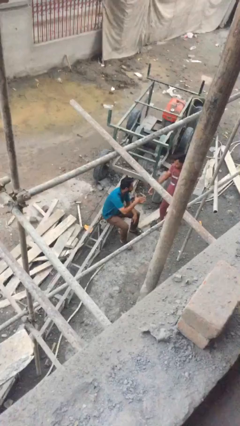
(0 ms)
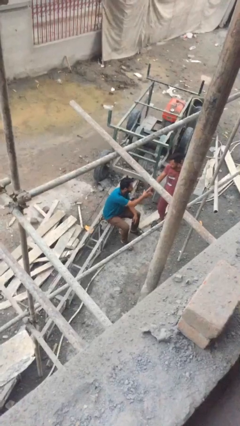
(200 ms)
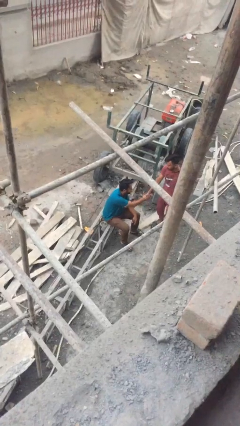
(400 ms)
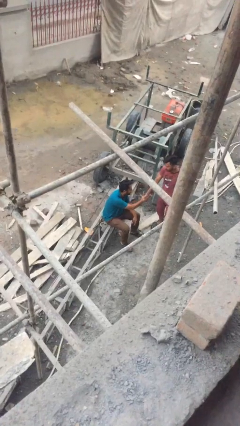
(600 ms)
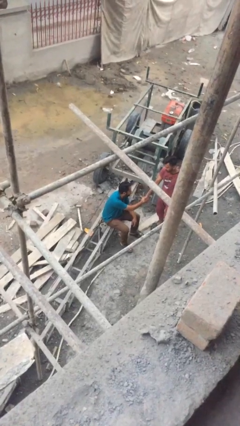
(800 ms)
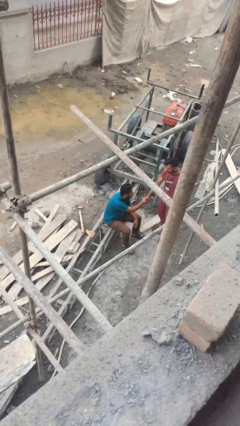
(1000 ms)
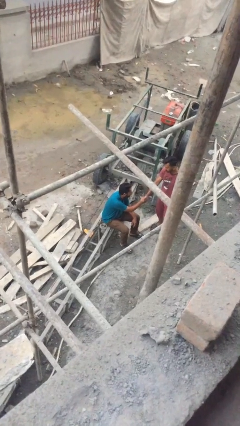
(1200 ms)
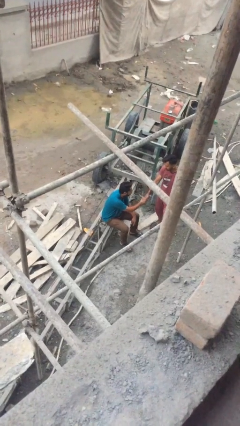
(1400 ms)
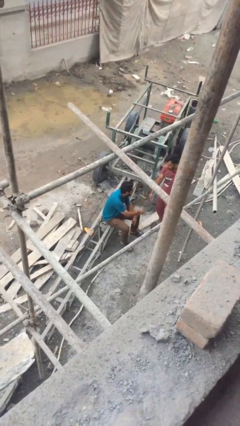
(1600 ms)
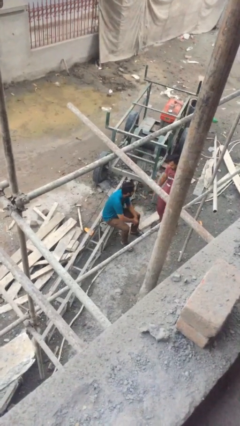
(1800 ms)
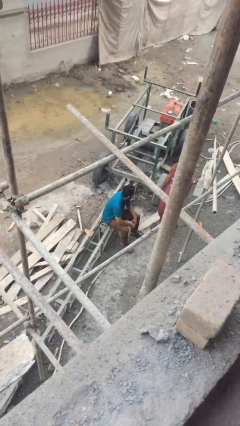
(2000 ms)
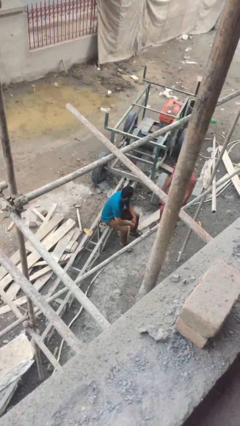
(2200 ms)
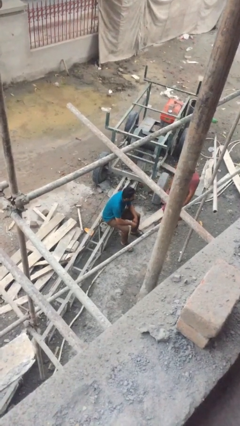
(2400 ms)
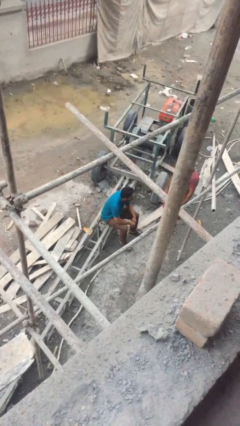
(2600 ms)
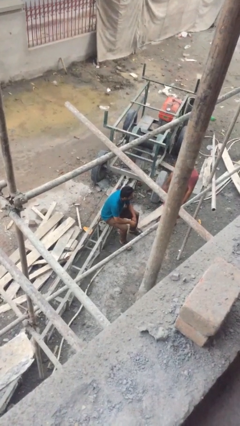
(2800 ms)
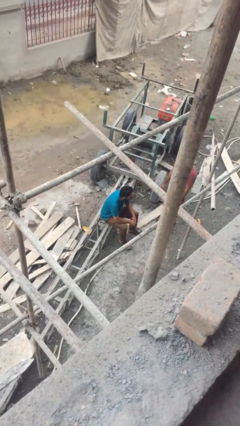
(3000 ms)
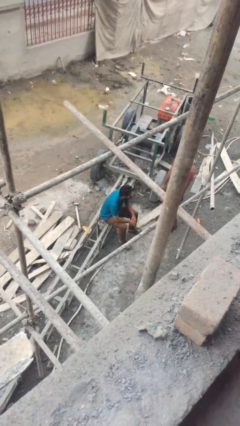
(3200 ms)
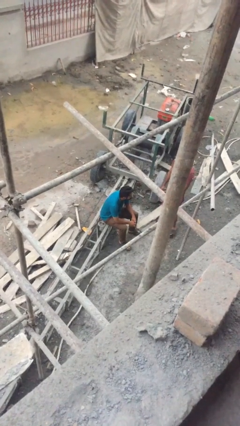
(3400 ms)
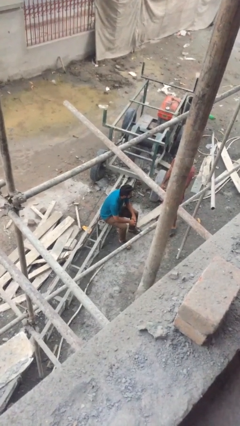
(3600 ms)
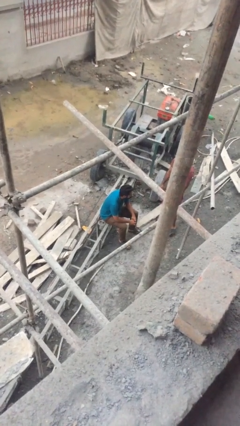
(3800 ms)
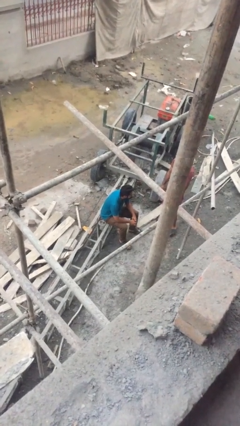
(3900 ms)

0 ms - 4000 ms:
person shakes hand

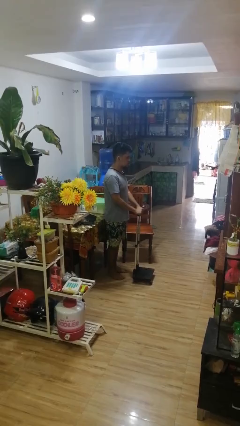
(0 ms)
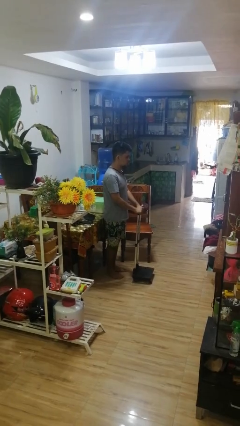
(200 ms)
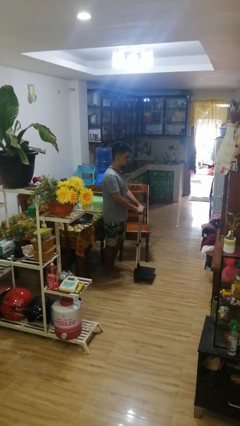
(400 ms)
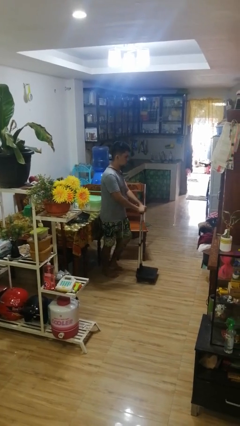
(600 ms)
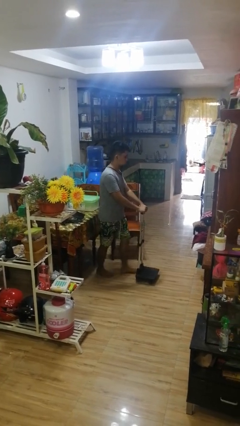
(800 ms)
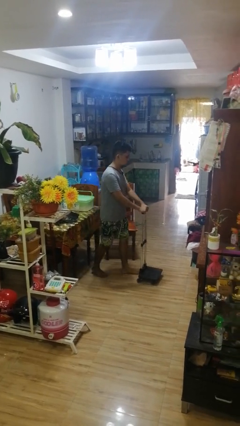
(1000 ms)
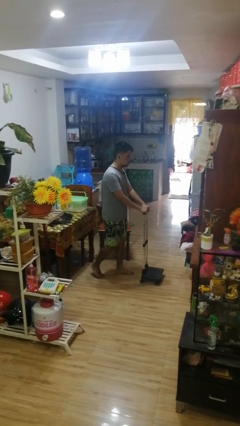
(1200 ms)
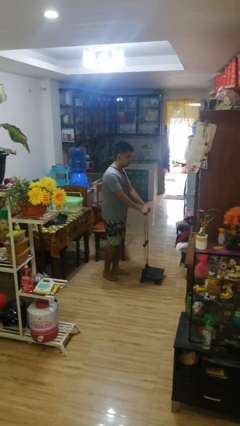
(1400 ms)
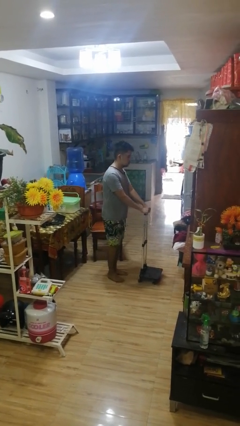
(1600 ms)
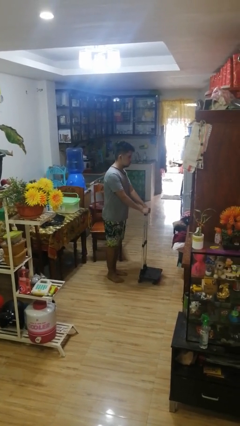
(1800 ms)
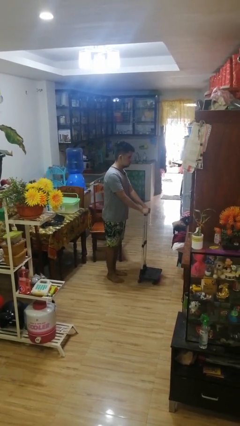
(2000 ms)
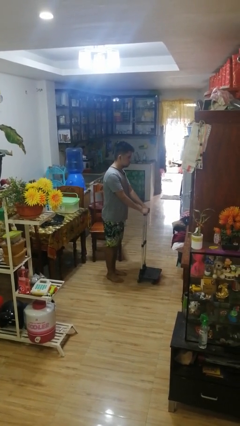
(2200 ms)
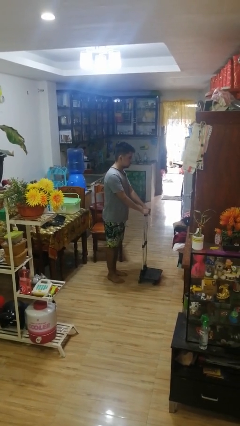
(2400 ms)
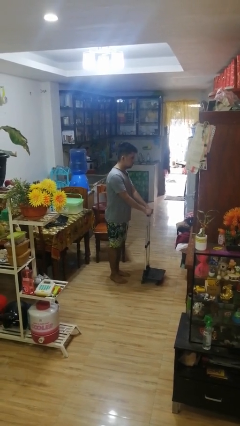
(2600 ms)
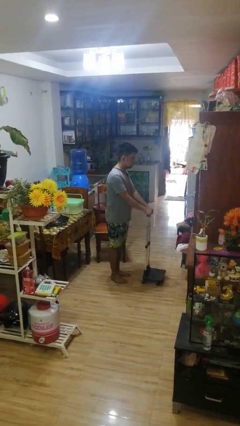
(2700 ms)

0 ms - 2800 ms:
person pushes wheeled cart

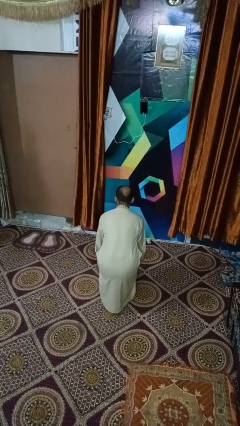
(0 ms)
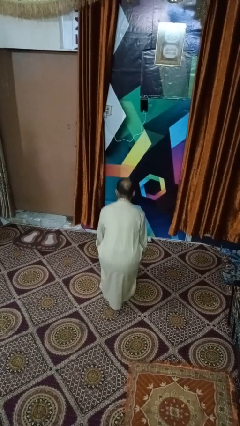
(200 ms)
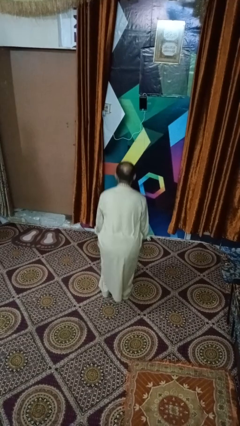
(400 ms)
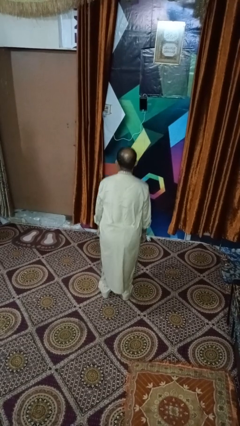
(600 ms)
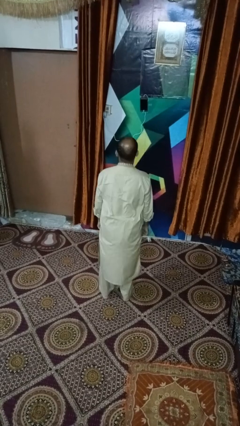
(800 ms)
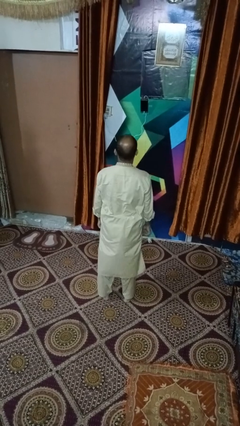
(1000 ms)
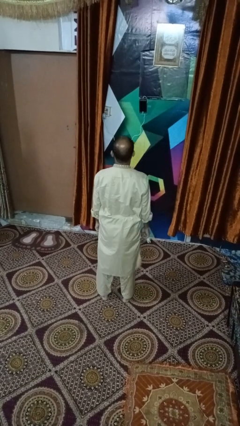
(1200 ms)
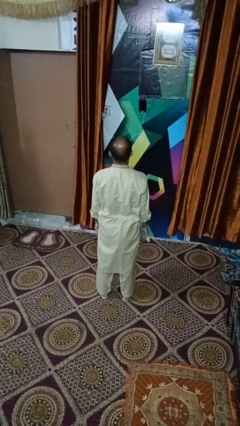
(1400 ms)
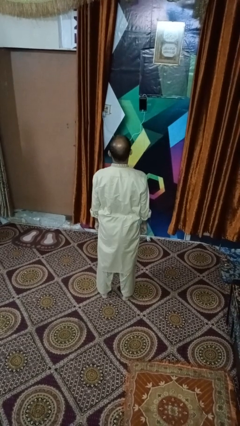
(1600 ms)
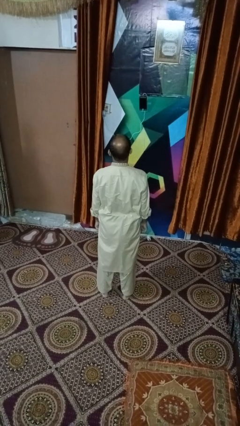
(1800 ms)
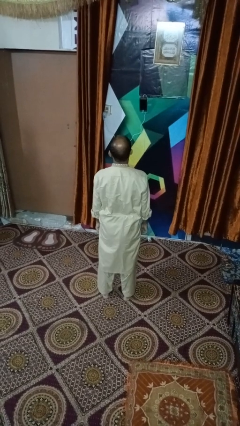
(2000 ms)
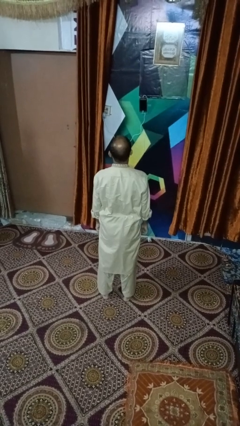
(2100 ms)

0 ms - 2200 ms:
person stands up

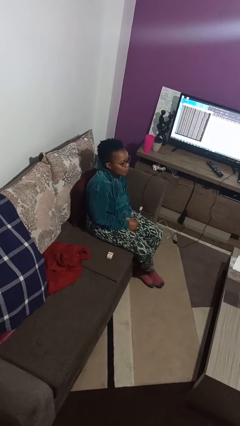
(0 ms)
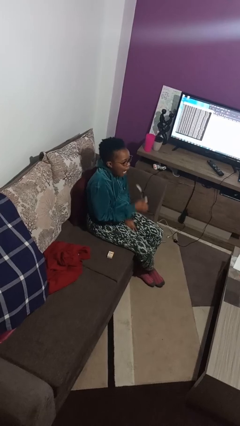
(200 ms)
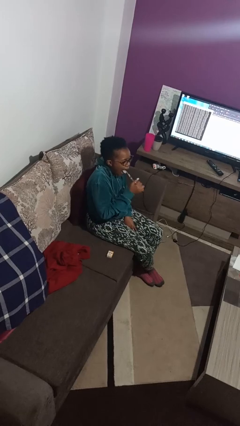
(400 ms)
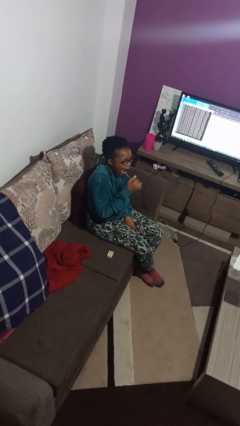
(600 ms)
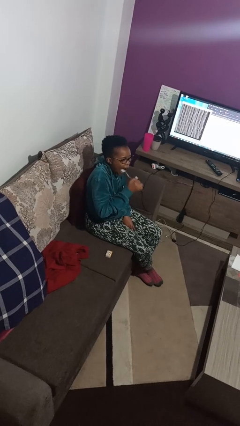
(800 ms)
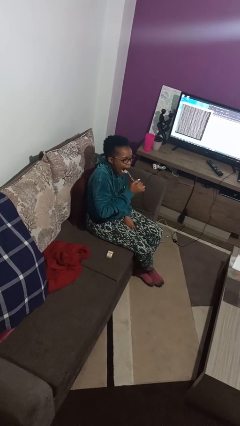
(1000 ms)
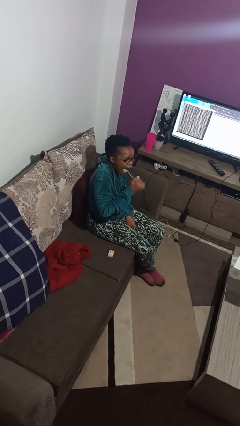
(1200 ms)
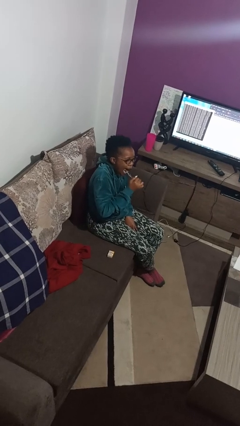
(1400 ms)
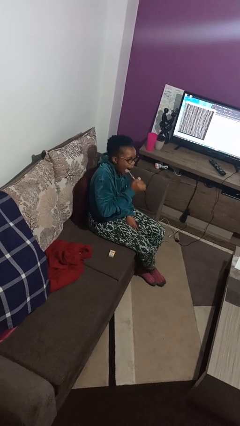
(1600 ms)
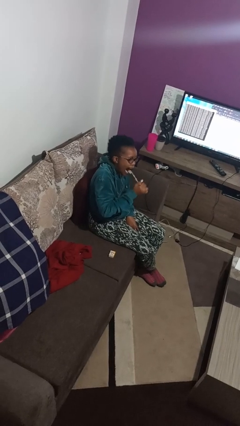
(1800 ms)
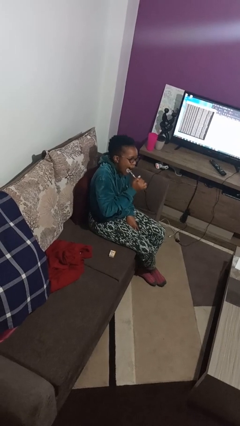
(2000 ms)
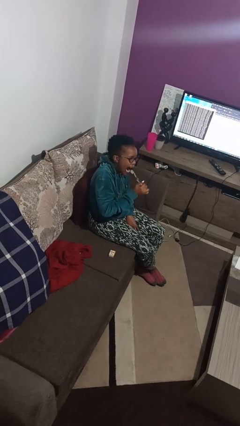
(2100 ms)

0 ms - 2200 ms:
person brushes teeth

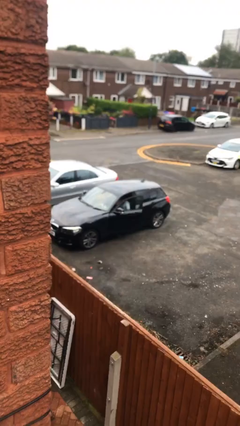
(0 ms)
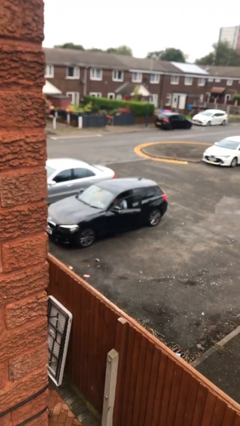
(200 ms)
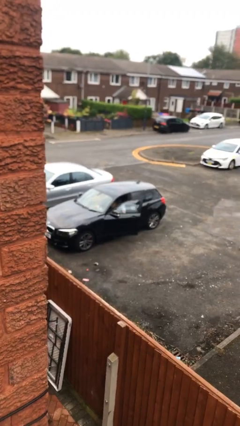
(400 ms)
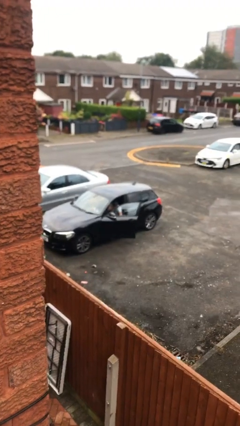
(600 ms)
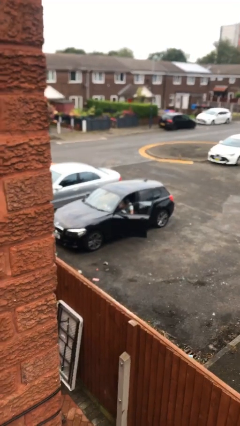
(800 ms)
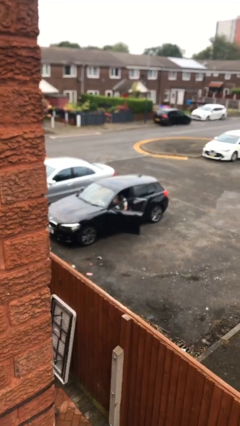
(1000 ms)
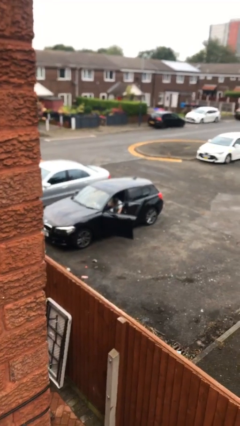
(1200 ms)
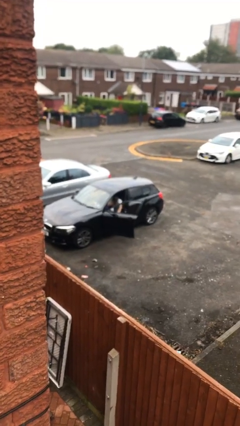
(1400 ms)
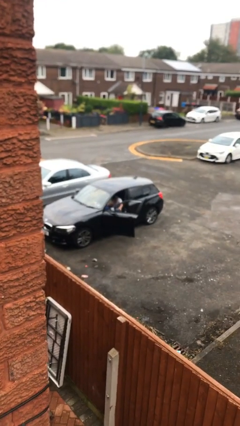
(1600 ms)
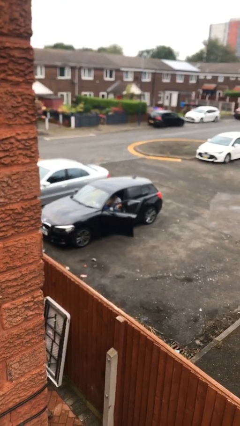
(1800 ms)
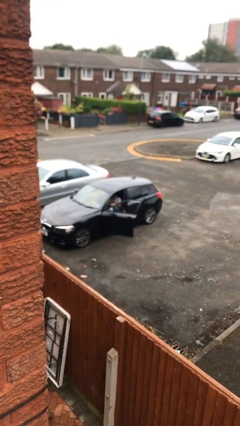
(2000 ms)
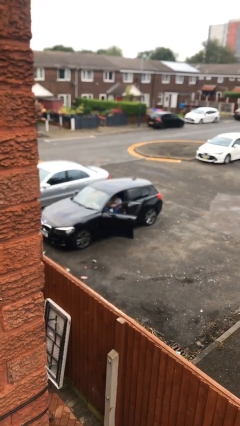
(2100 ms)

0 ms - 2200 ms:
person opens car door

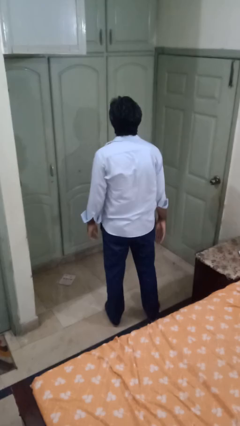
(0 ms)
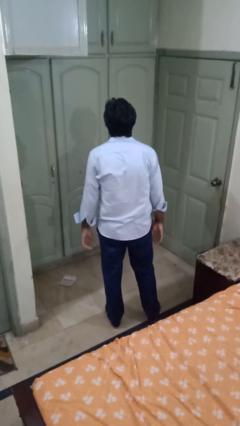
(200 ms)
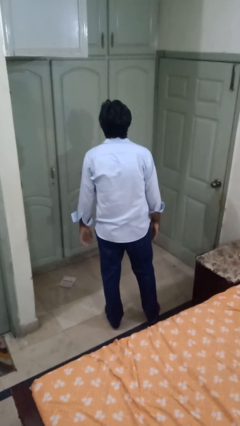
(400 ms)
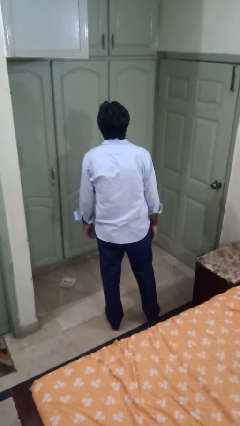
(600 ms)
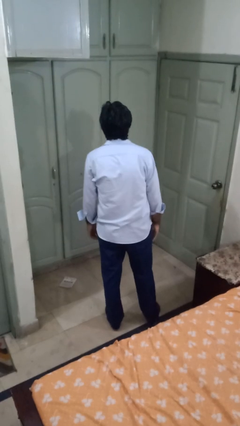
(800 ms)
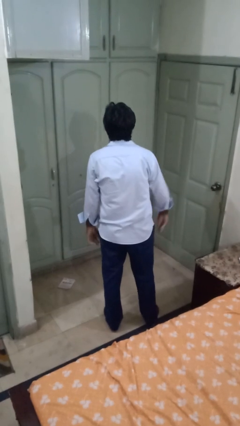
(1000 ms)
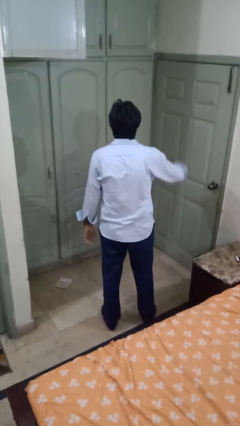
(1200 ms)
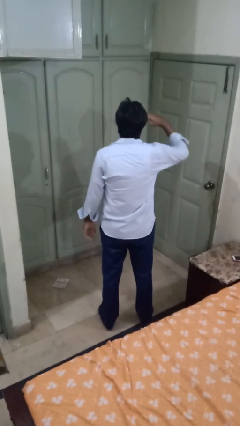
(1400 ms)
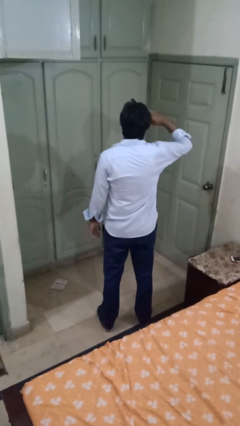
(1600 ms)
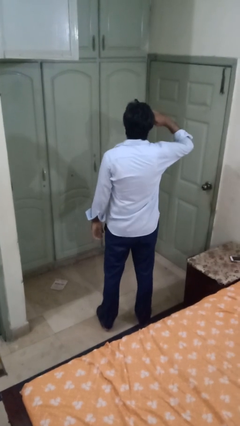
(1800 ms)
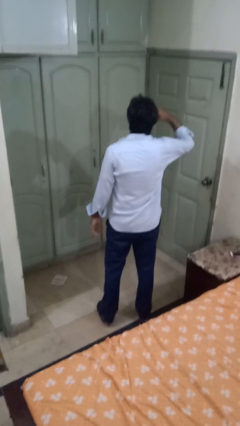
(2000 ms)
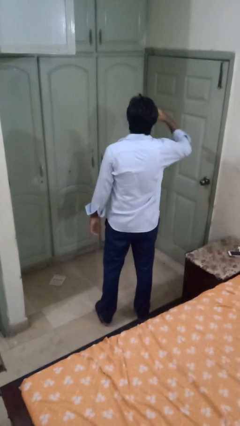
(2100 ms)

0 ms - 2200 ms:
person salutes

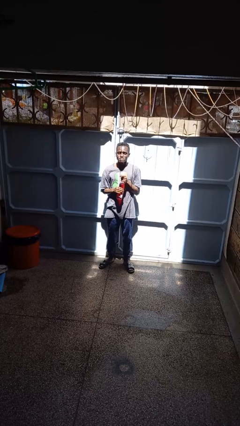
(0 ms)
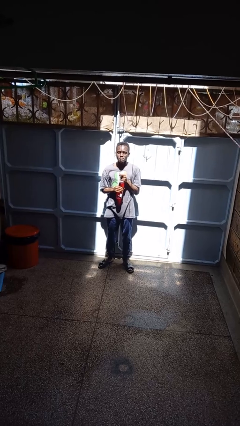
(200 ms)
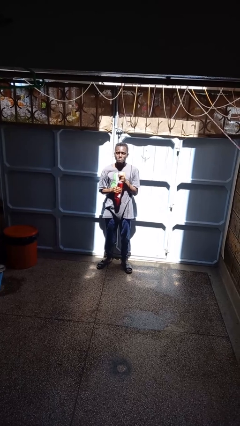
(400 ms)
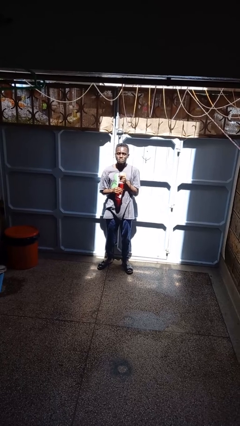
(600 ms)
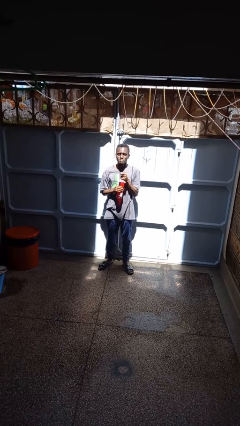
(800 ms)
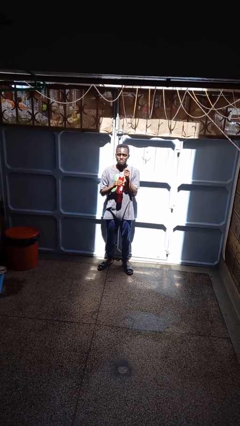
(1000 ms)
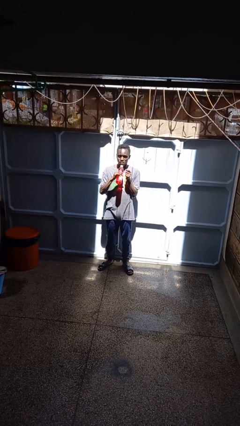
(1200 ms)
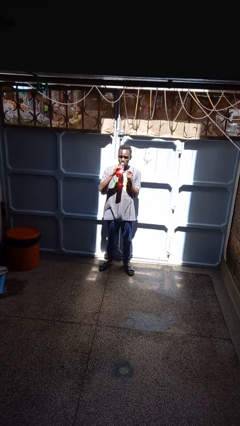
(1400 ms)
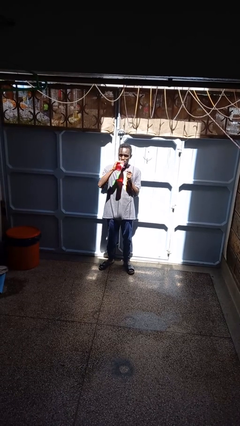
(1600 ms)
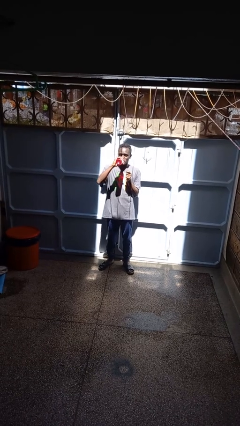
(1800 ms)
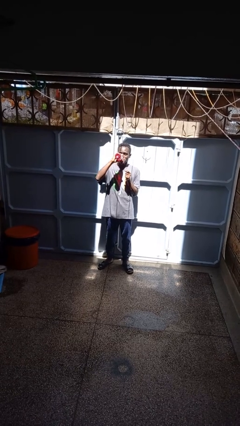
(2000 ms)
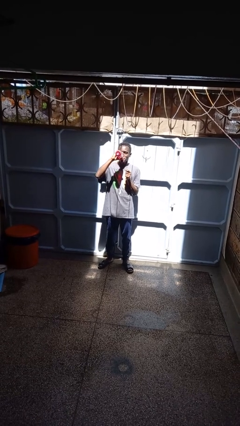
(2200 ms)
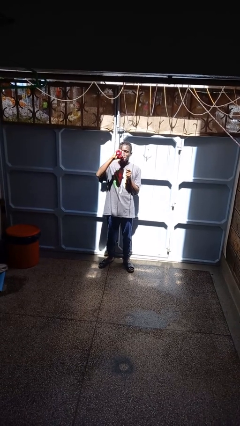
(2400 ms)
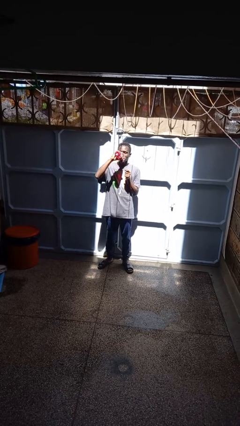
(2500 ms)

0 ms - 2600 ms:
person drinks from beverage can
